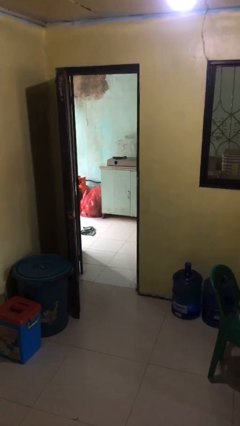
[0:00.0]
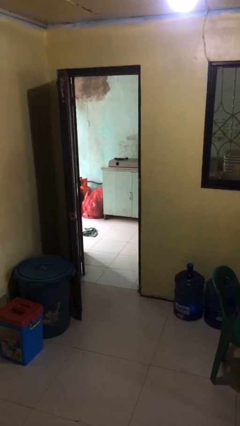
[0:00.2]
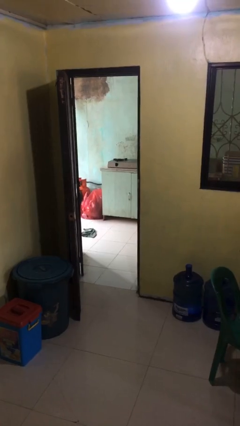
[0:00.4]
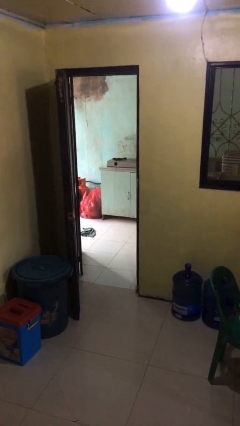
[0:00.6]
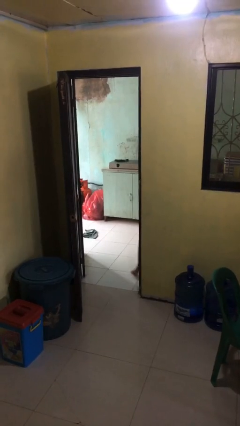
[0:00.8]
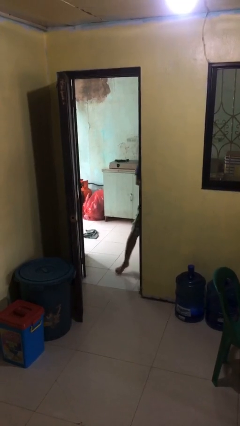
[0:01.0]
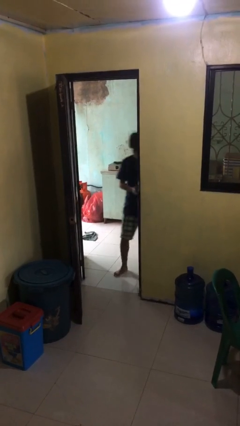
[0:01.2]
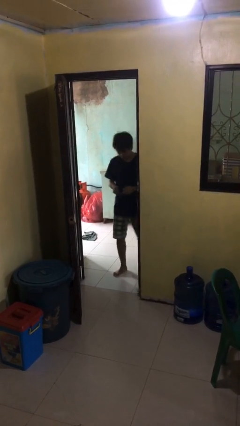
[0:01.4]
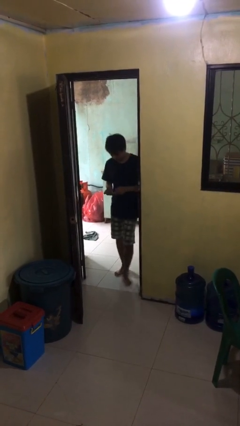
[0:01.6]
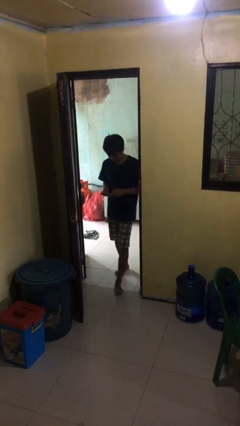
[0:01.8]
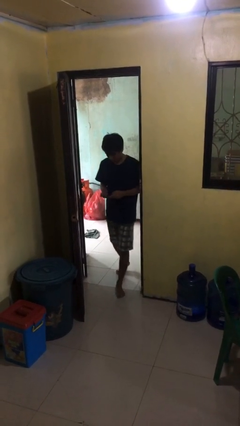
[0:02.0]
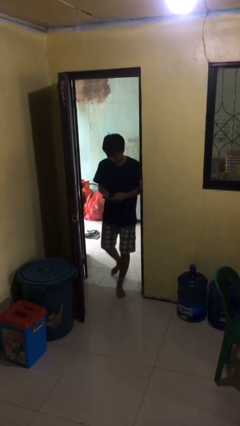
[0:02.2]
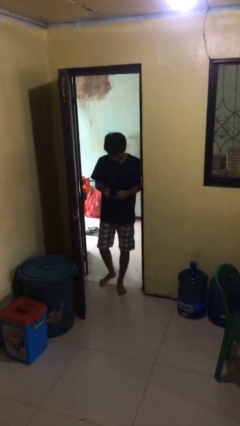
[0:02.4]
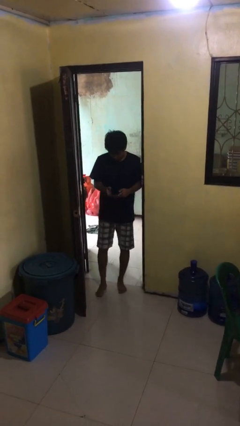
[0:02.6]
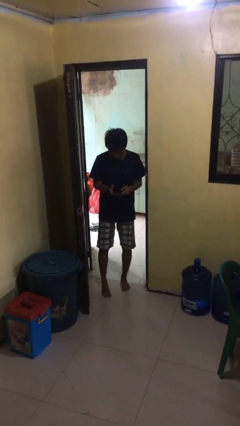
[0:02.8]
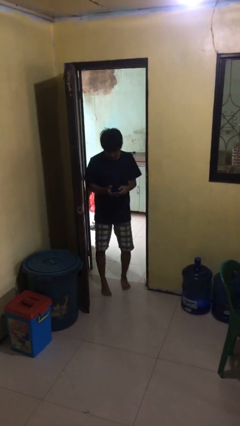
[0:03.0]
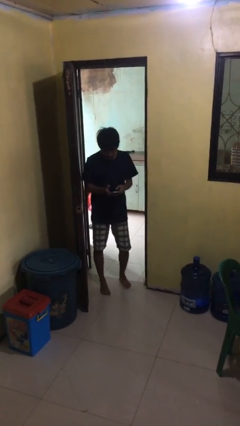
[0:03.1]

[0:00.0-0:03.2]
person enters scene through structure

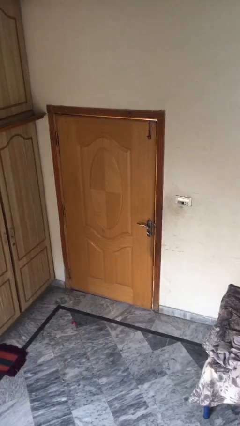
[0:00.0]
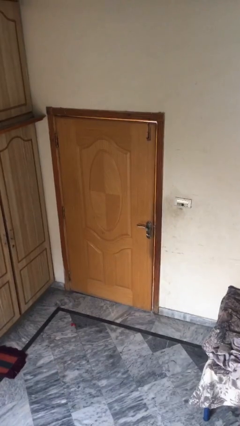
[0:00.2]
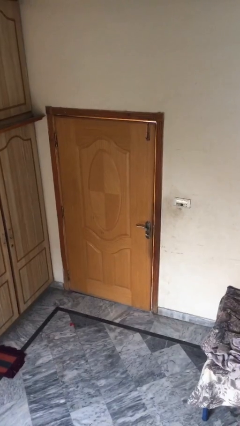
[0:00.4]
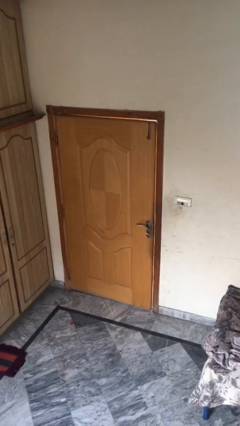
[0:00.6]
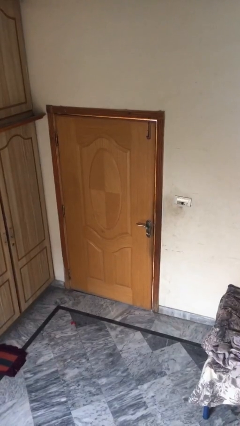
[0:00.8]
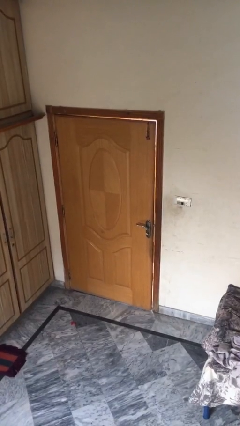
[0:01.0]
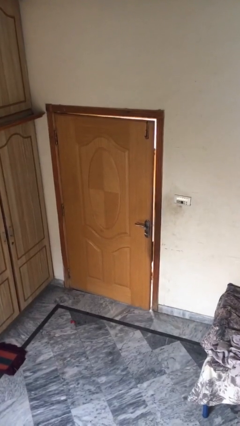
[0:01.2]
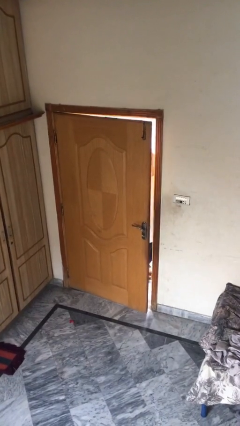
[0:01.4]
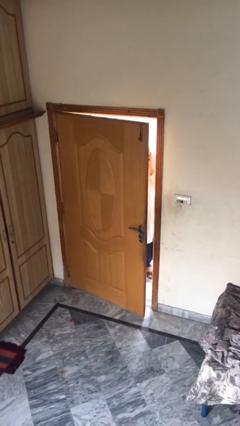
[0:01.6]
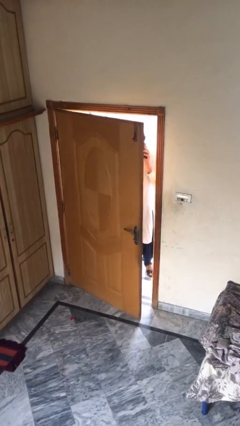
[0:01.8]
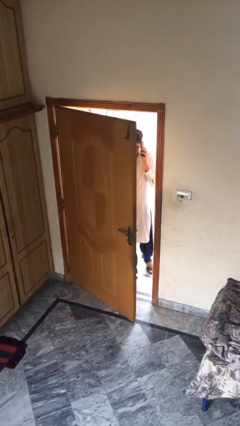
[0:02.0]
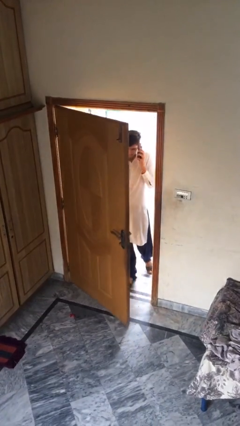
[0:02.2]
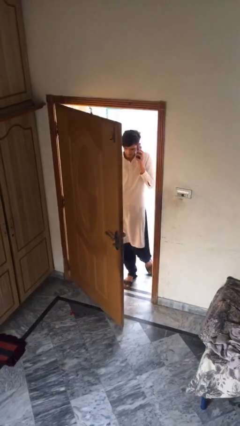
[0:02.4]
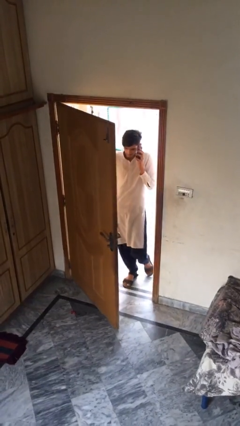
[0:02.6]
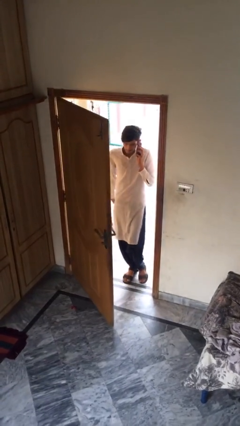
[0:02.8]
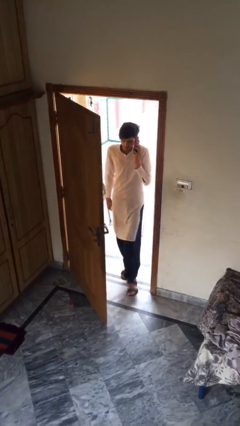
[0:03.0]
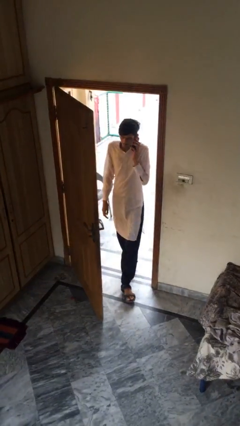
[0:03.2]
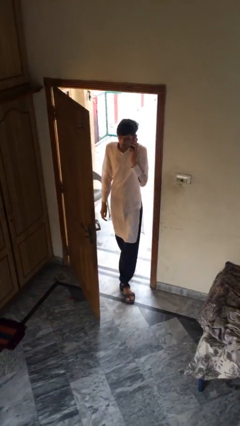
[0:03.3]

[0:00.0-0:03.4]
person opens facility door

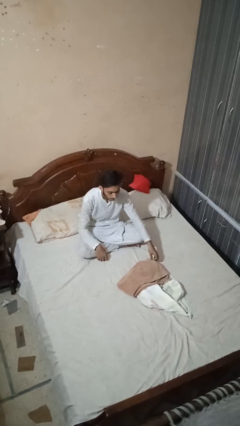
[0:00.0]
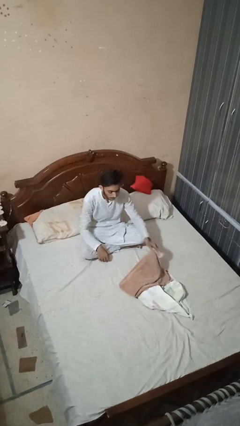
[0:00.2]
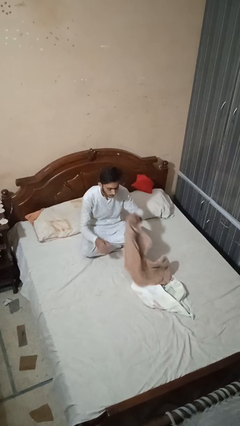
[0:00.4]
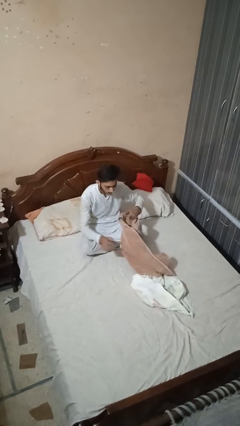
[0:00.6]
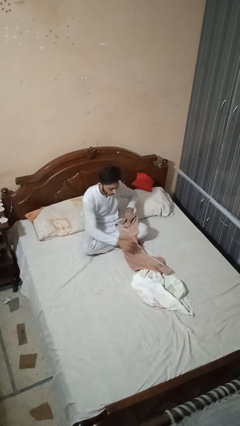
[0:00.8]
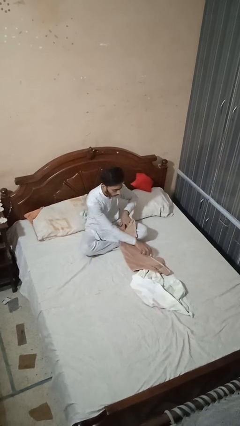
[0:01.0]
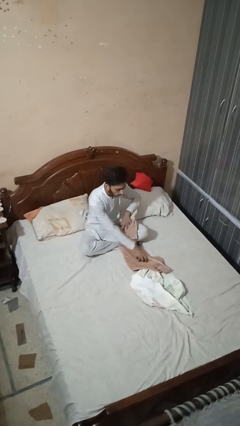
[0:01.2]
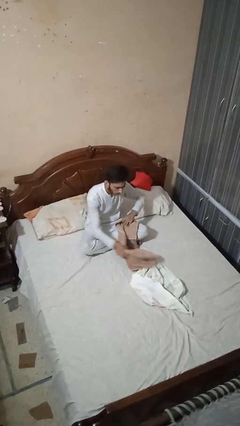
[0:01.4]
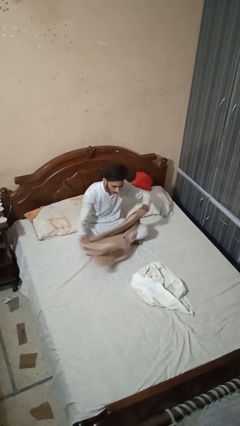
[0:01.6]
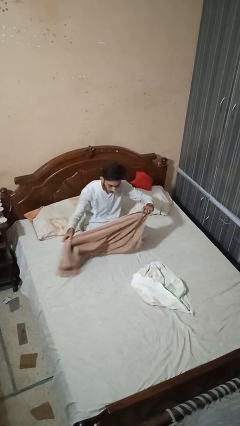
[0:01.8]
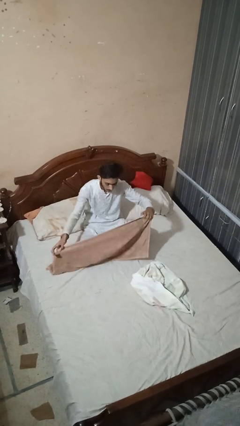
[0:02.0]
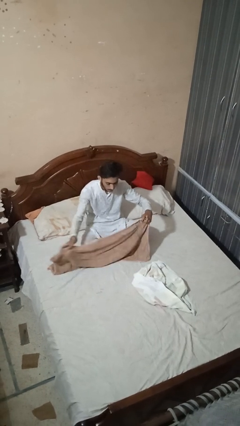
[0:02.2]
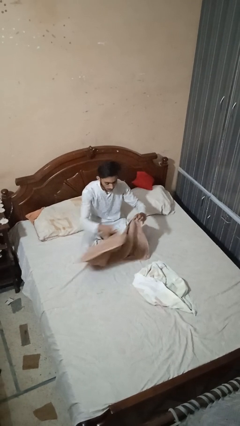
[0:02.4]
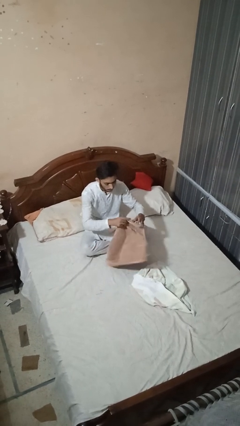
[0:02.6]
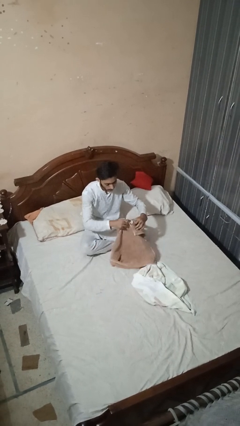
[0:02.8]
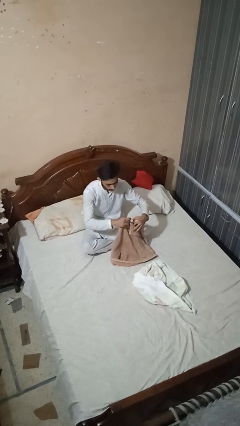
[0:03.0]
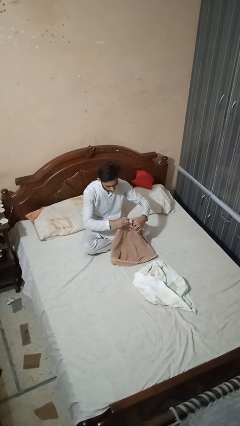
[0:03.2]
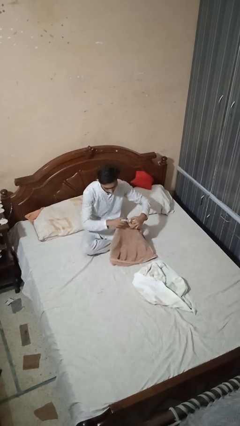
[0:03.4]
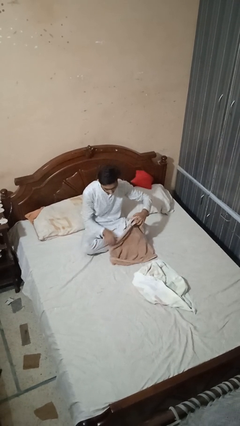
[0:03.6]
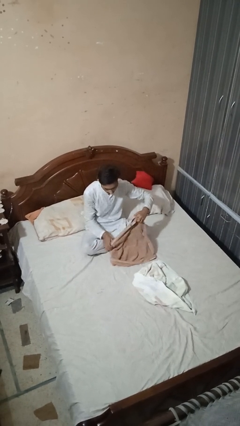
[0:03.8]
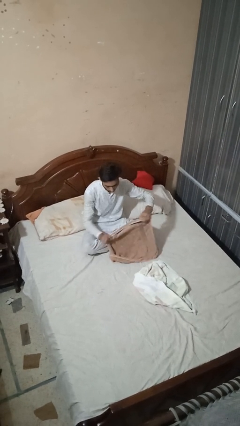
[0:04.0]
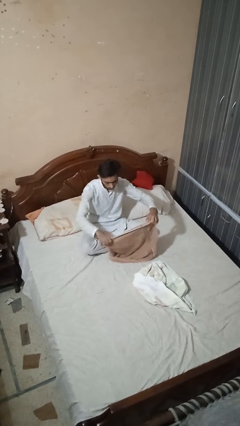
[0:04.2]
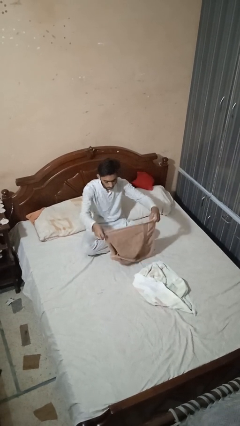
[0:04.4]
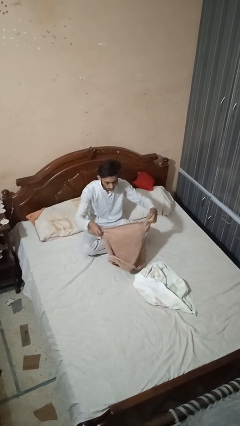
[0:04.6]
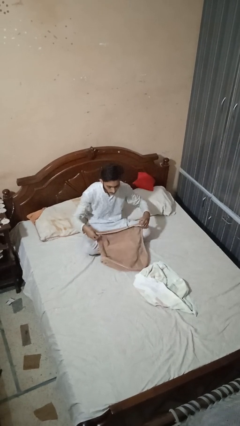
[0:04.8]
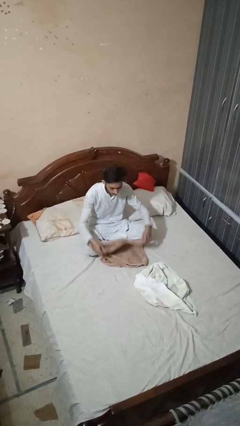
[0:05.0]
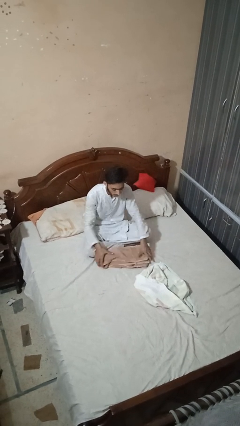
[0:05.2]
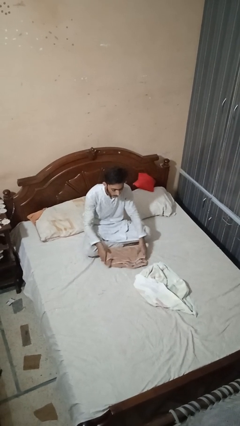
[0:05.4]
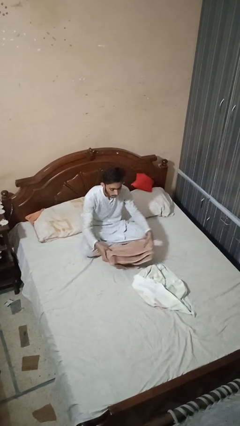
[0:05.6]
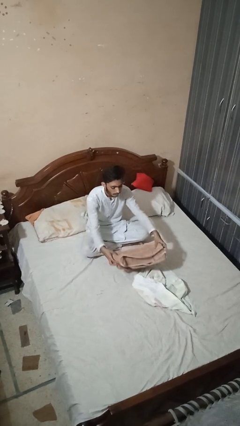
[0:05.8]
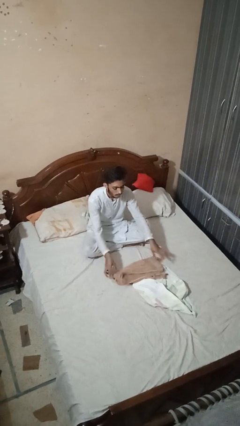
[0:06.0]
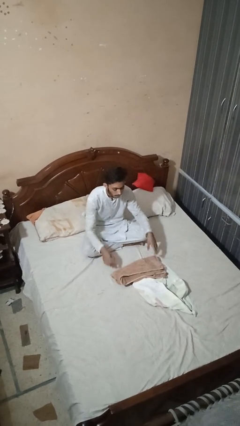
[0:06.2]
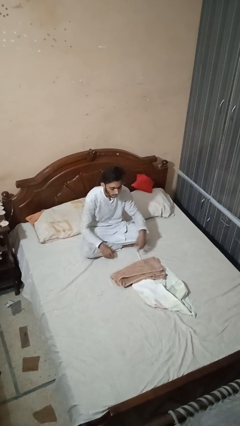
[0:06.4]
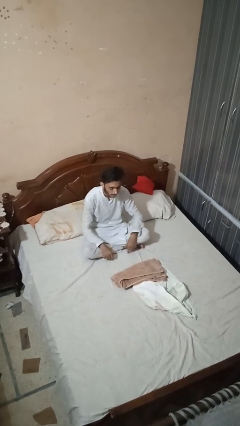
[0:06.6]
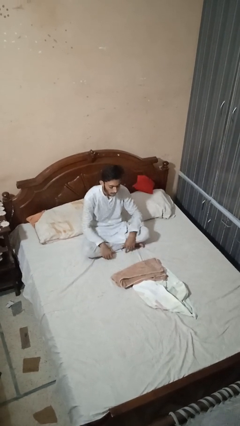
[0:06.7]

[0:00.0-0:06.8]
person folds towel

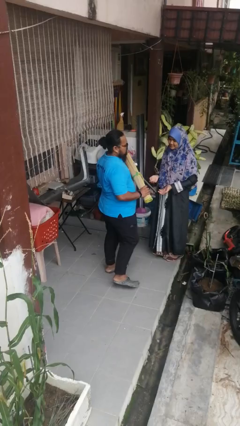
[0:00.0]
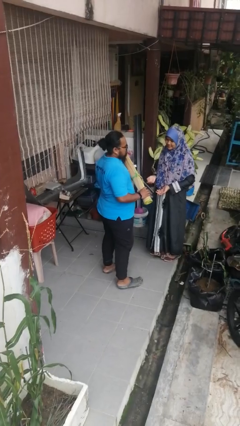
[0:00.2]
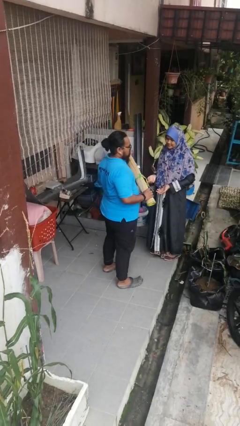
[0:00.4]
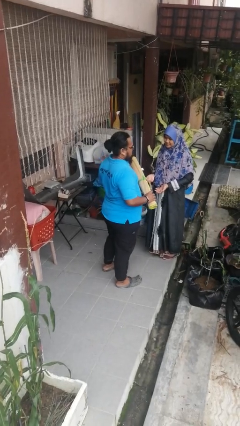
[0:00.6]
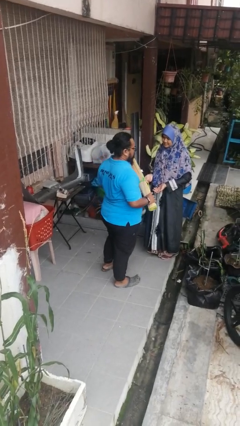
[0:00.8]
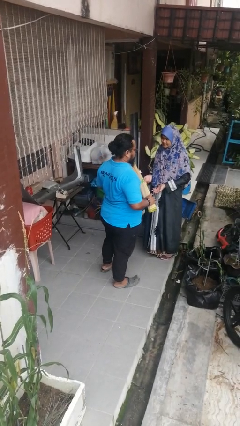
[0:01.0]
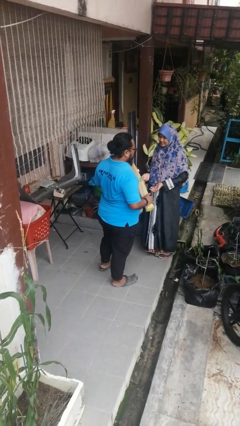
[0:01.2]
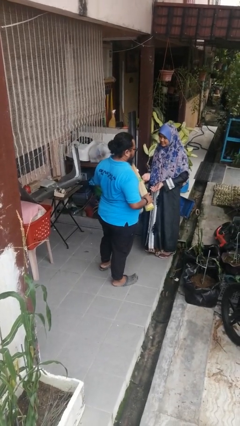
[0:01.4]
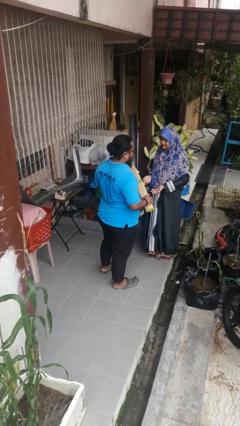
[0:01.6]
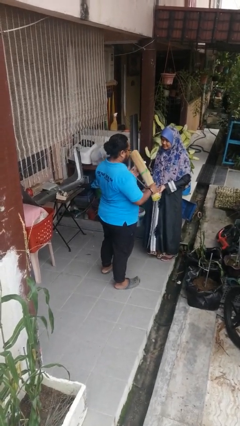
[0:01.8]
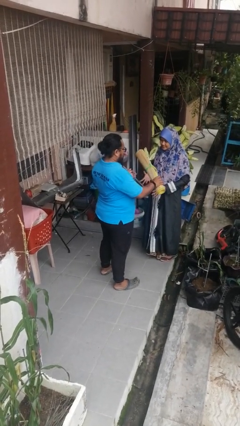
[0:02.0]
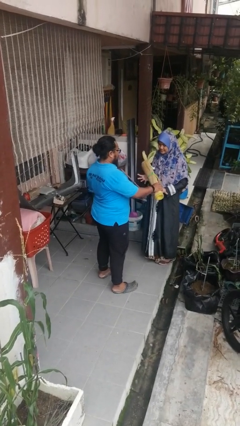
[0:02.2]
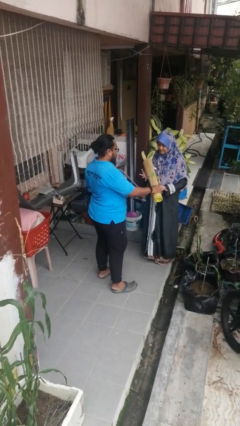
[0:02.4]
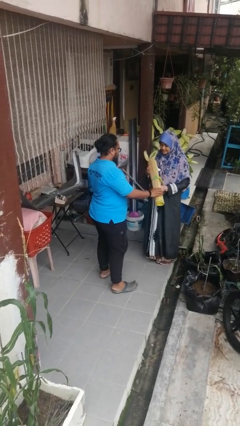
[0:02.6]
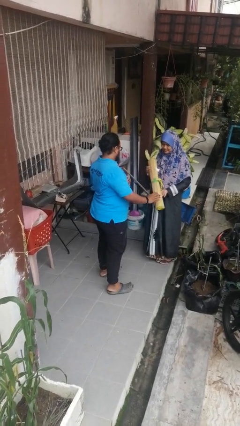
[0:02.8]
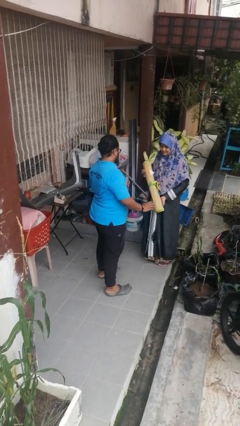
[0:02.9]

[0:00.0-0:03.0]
person transfers object to person

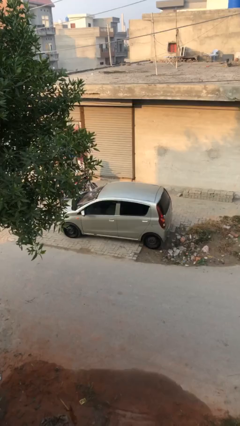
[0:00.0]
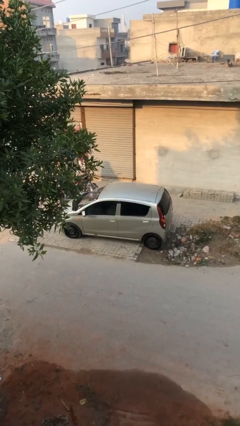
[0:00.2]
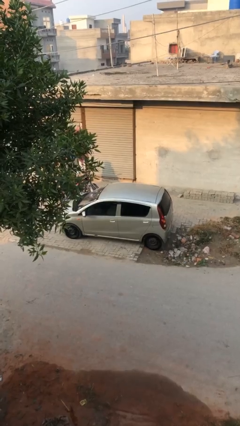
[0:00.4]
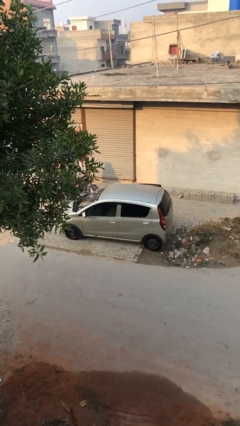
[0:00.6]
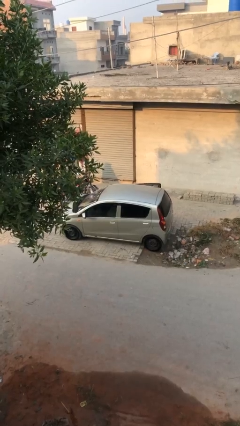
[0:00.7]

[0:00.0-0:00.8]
car drops off person
